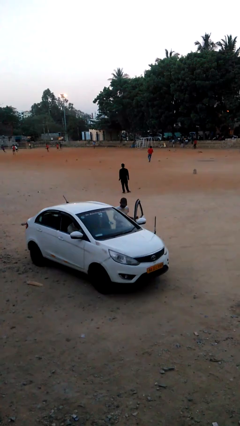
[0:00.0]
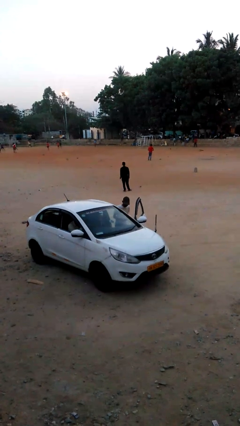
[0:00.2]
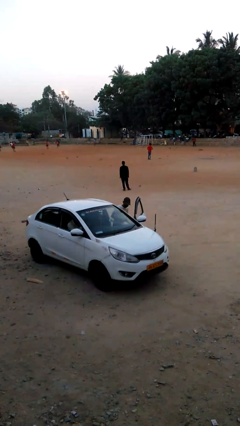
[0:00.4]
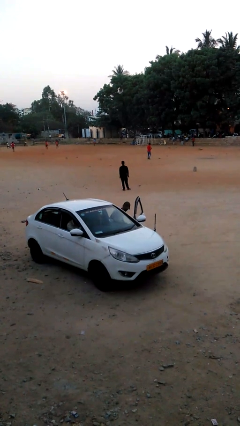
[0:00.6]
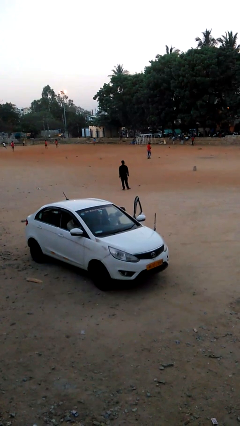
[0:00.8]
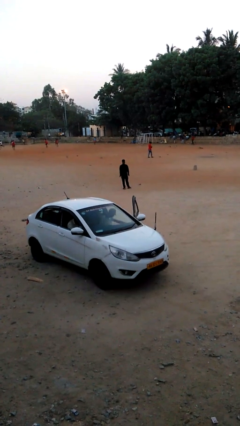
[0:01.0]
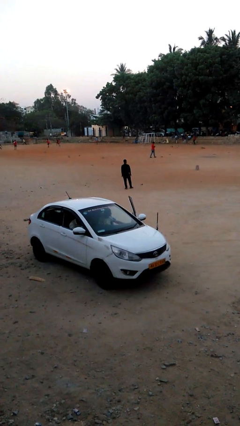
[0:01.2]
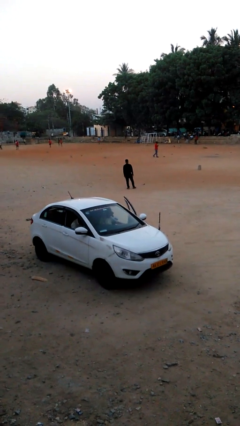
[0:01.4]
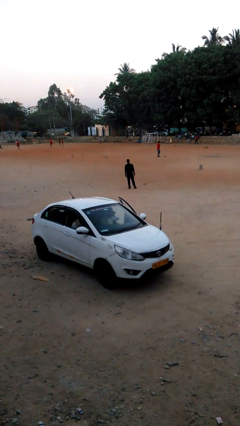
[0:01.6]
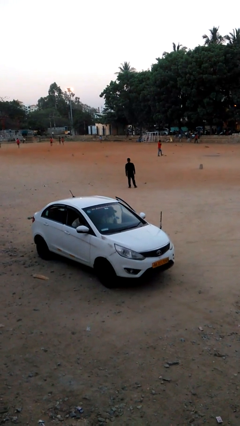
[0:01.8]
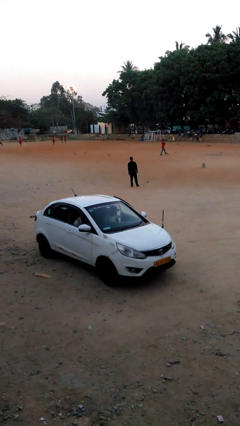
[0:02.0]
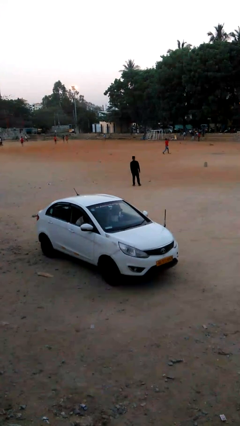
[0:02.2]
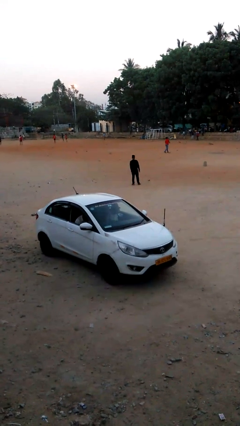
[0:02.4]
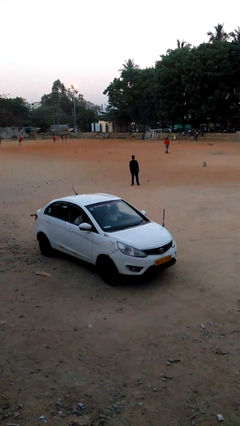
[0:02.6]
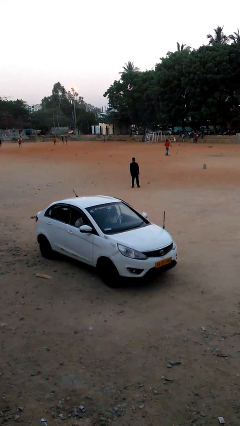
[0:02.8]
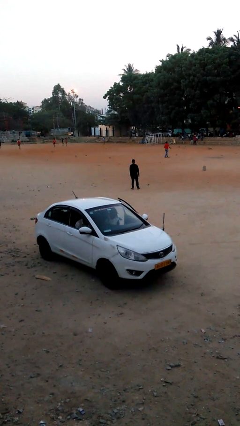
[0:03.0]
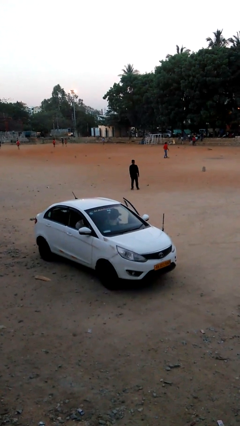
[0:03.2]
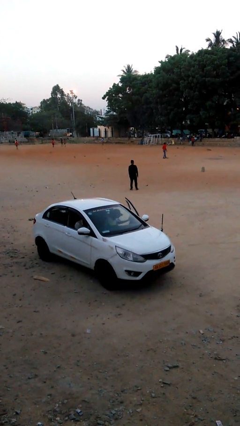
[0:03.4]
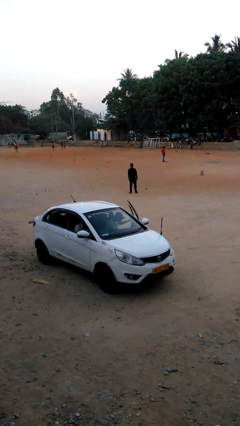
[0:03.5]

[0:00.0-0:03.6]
person enters car

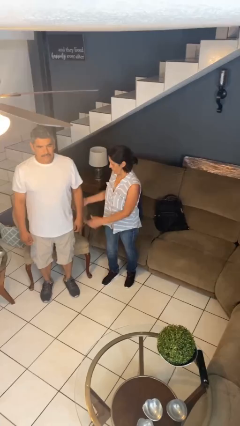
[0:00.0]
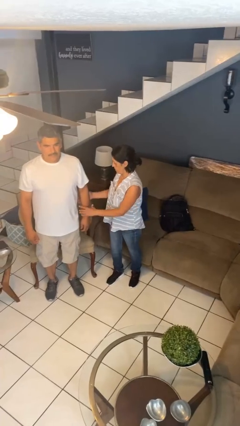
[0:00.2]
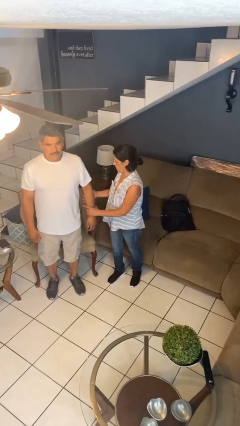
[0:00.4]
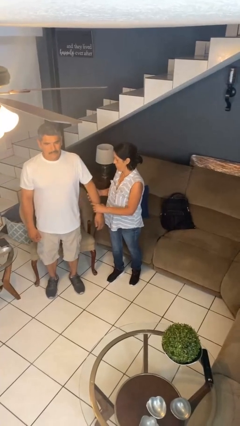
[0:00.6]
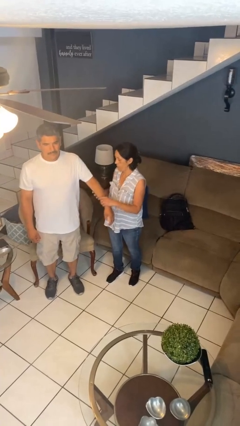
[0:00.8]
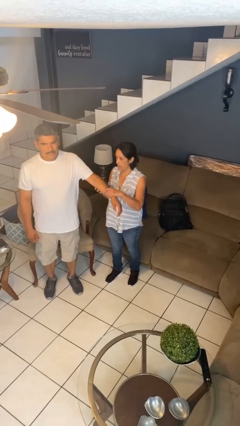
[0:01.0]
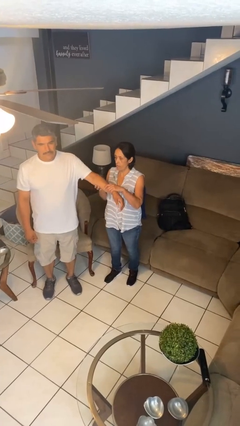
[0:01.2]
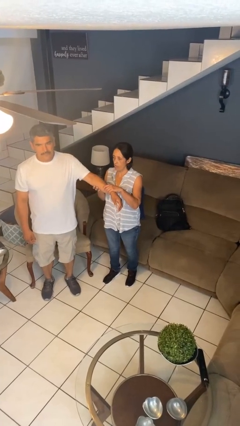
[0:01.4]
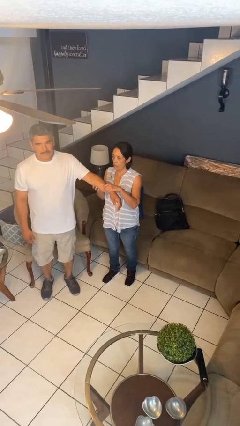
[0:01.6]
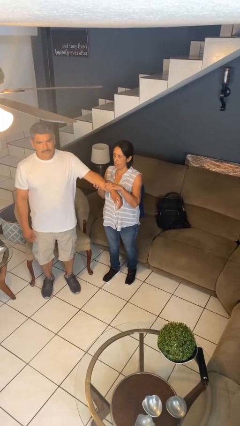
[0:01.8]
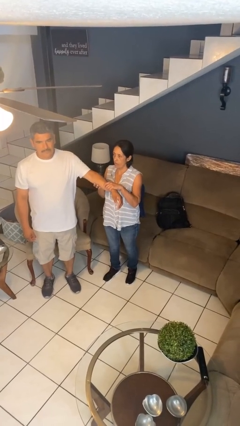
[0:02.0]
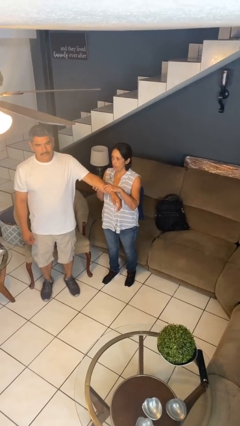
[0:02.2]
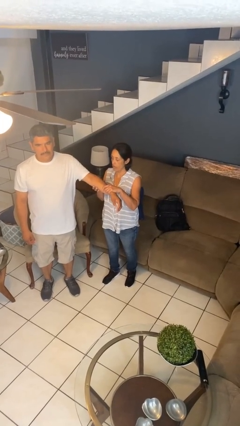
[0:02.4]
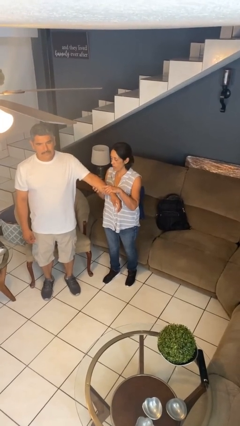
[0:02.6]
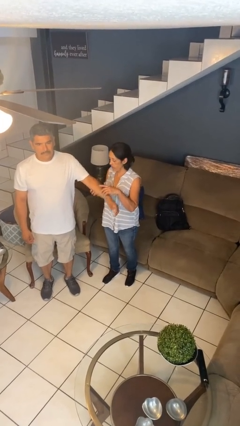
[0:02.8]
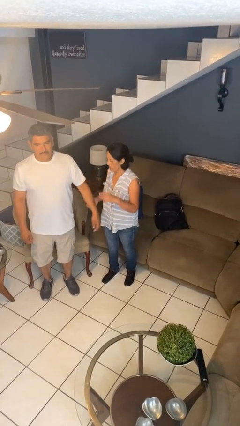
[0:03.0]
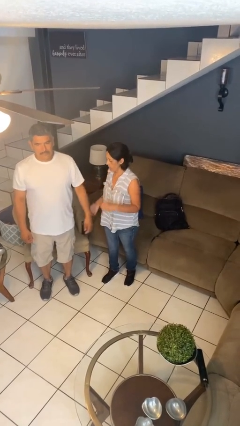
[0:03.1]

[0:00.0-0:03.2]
person grabs person by forearm

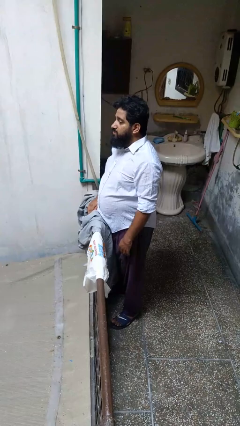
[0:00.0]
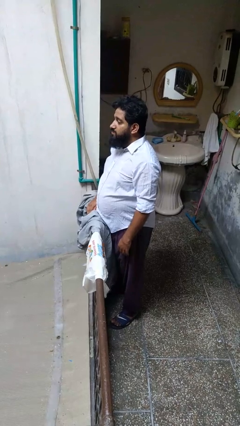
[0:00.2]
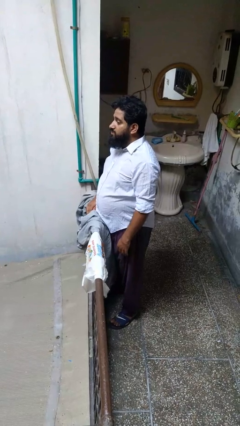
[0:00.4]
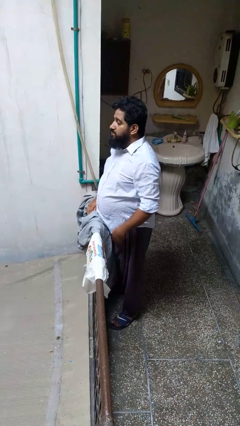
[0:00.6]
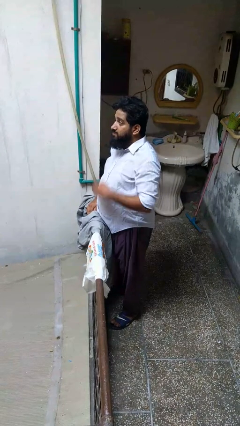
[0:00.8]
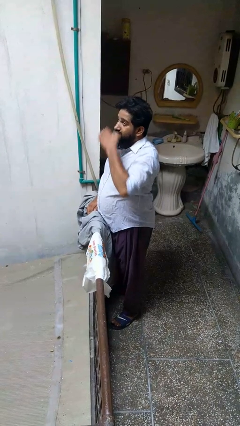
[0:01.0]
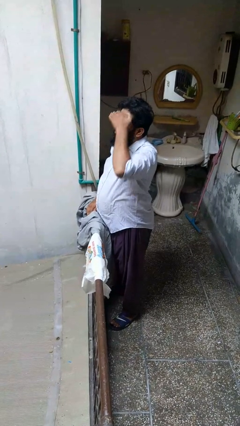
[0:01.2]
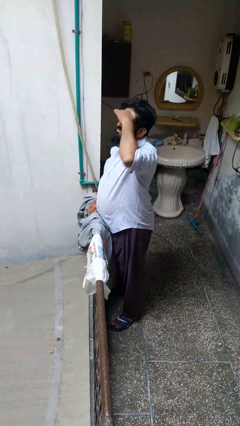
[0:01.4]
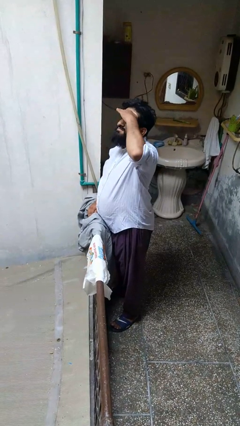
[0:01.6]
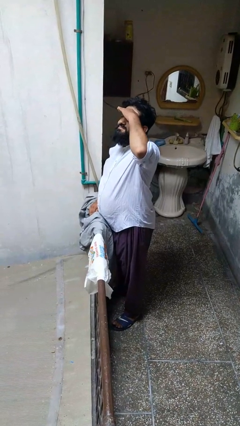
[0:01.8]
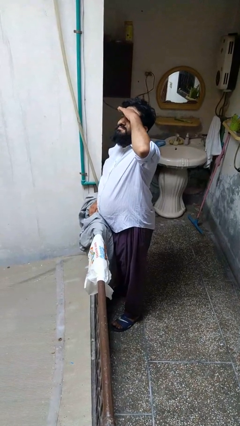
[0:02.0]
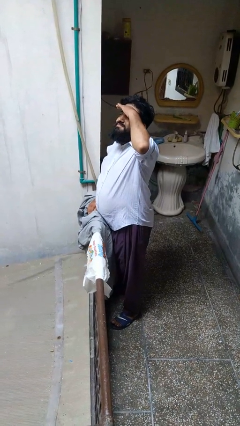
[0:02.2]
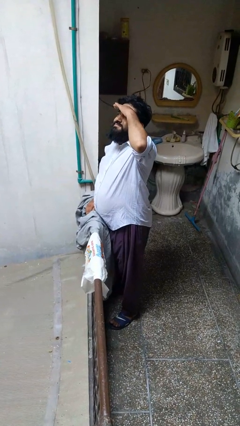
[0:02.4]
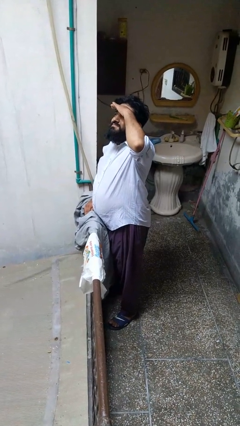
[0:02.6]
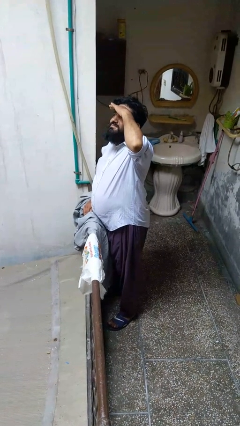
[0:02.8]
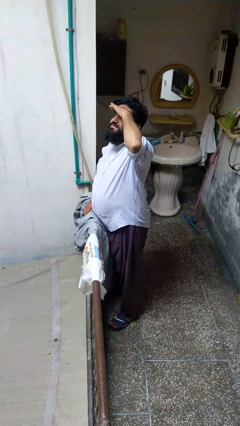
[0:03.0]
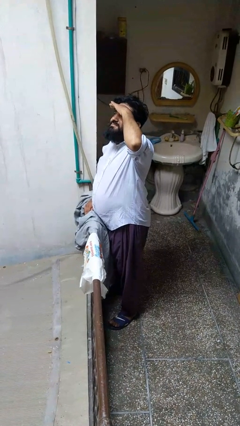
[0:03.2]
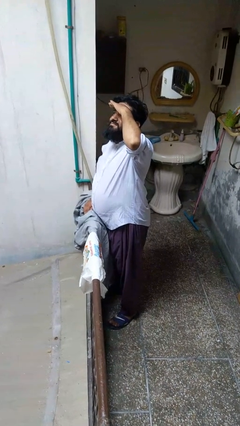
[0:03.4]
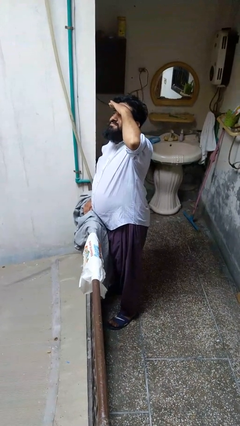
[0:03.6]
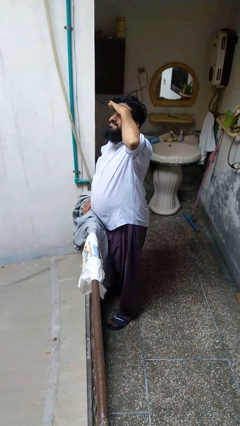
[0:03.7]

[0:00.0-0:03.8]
person shades eyes

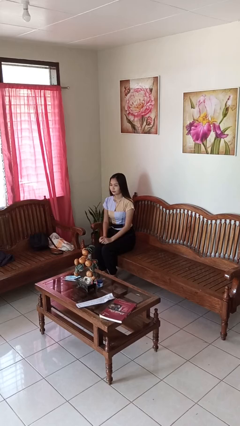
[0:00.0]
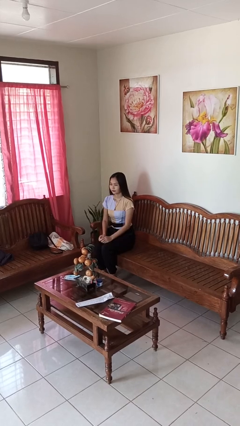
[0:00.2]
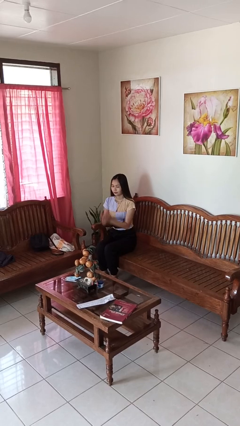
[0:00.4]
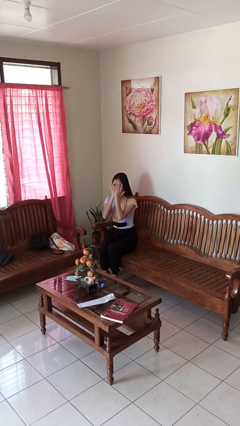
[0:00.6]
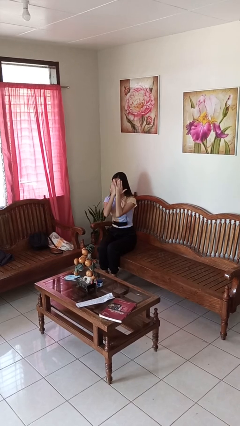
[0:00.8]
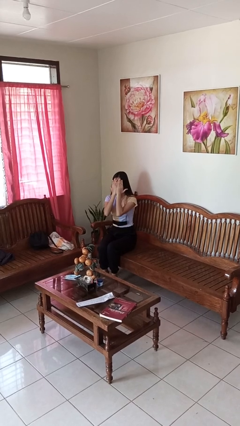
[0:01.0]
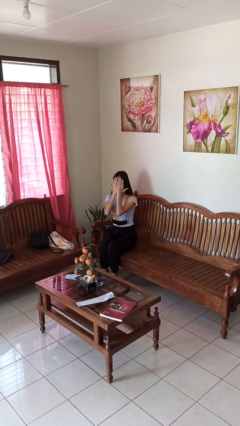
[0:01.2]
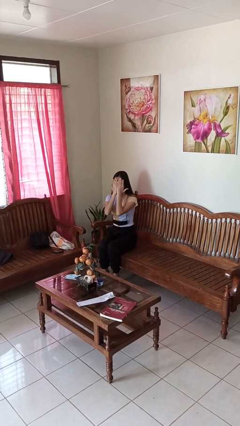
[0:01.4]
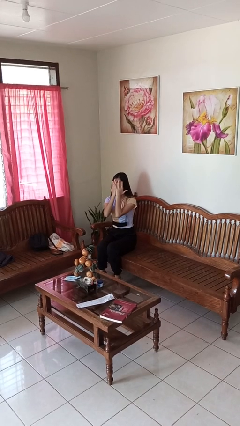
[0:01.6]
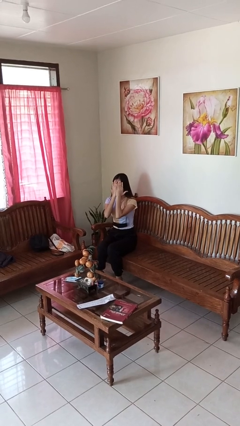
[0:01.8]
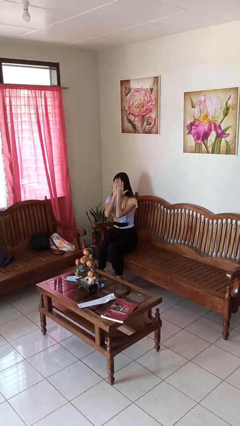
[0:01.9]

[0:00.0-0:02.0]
person covers face with hands

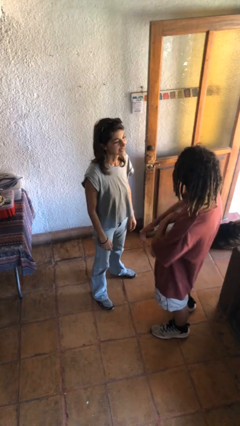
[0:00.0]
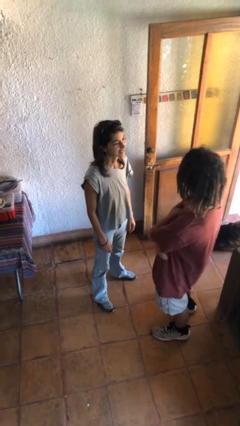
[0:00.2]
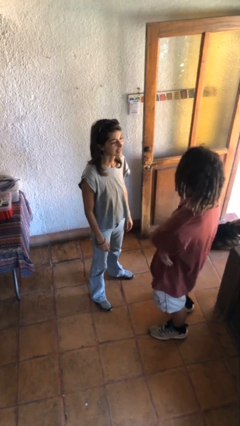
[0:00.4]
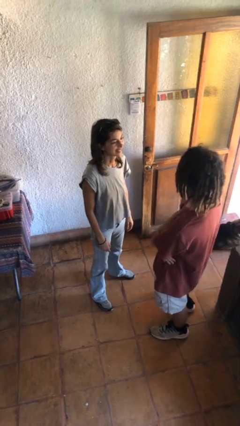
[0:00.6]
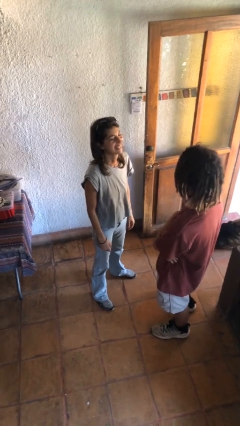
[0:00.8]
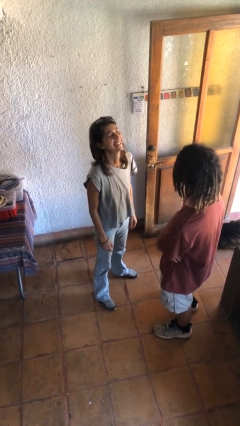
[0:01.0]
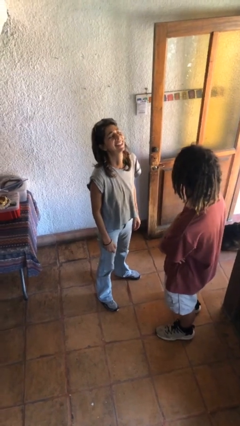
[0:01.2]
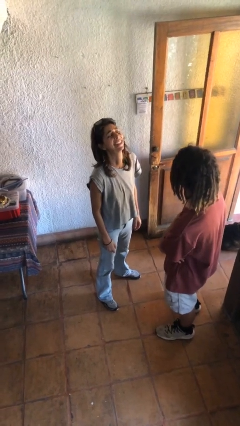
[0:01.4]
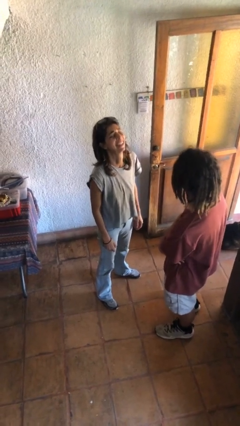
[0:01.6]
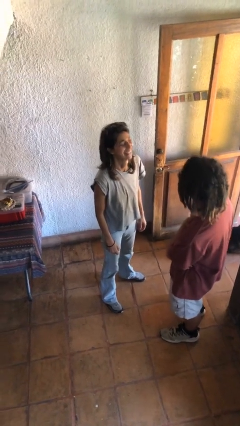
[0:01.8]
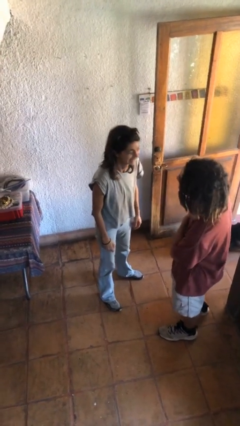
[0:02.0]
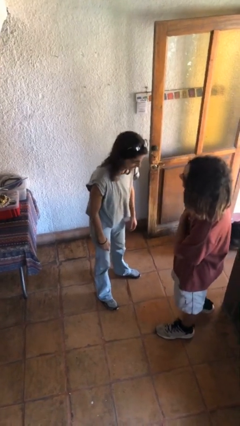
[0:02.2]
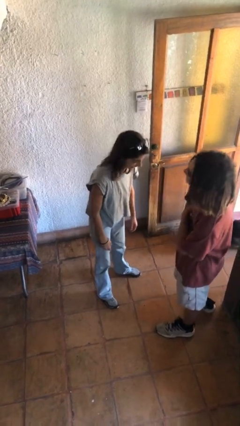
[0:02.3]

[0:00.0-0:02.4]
person laughs with person

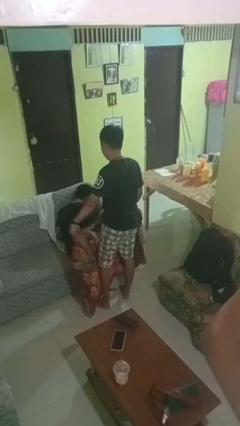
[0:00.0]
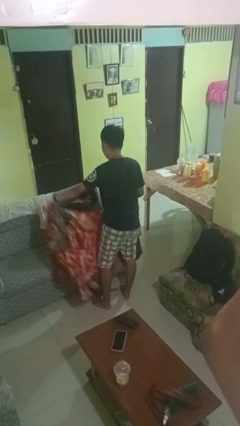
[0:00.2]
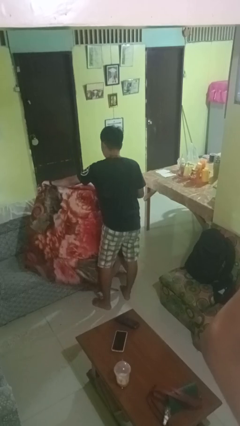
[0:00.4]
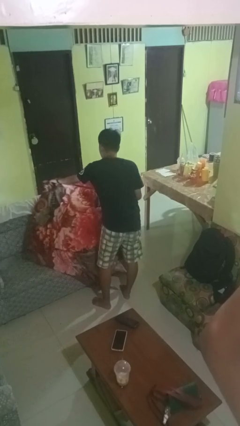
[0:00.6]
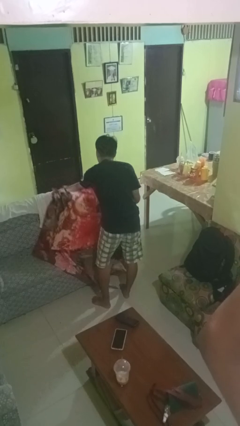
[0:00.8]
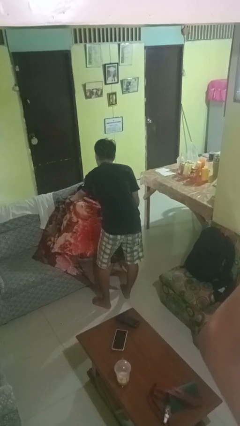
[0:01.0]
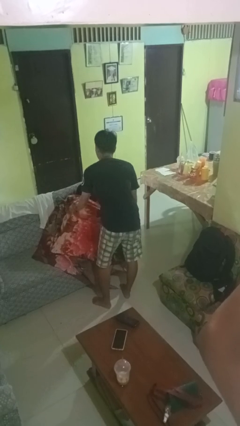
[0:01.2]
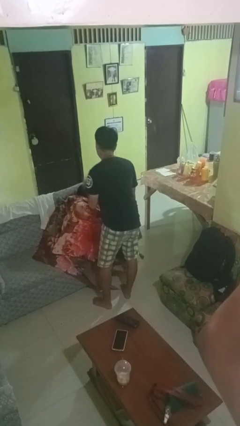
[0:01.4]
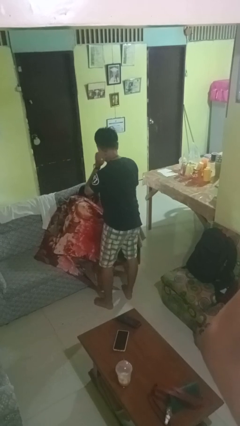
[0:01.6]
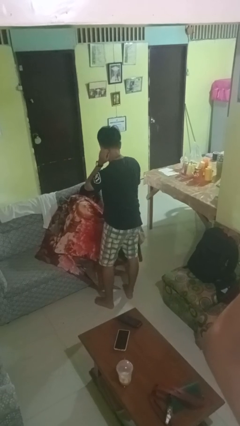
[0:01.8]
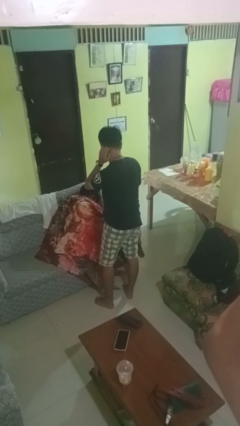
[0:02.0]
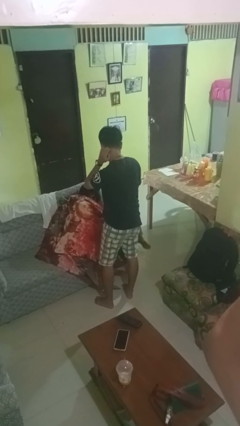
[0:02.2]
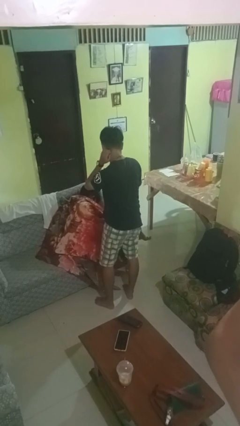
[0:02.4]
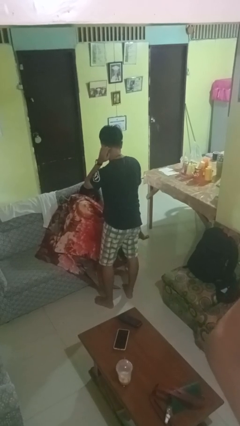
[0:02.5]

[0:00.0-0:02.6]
person covers friend with blanket
